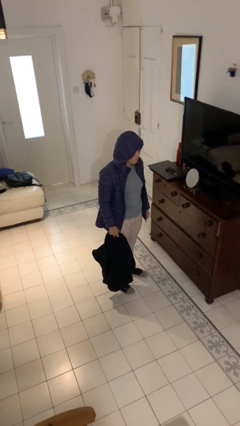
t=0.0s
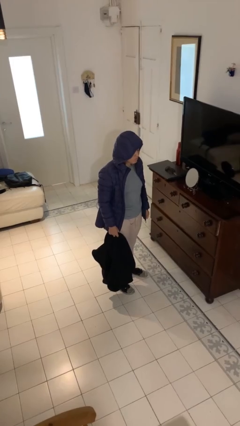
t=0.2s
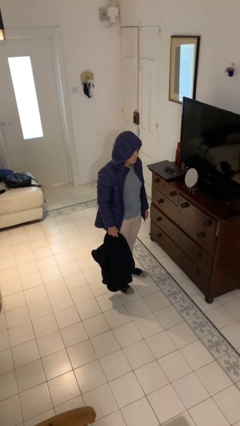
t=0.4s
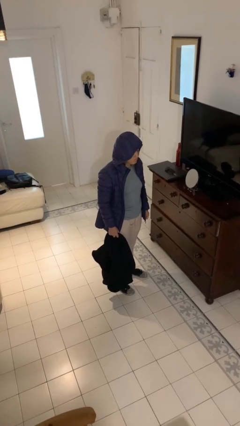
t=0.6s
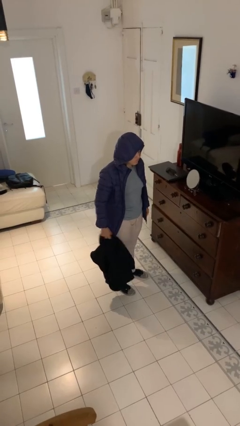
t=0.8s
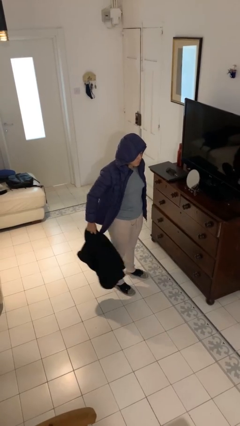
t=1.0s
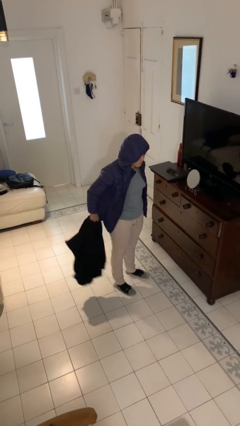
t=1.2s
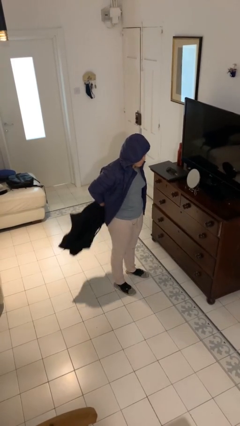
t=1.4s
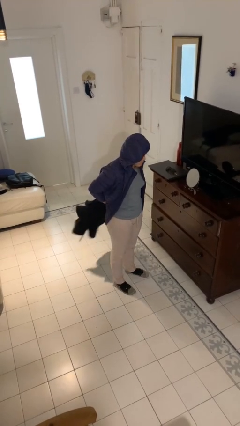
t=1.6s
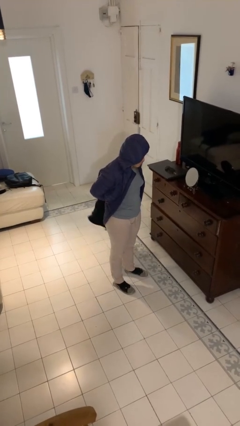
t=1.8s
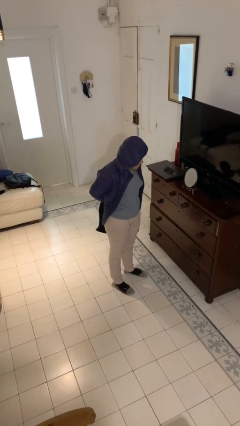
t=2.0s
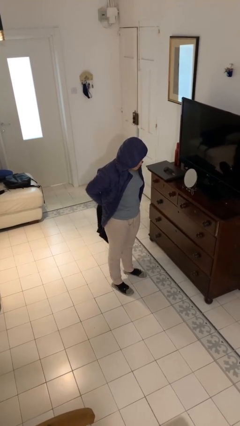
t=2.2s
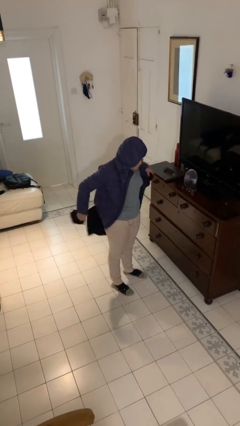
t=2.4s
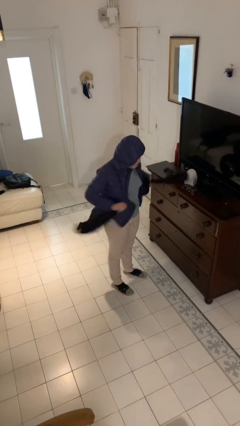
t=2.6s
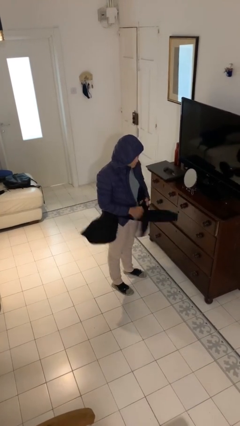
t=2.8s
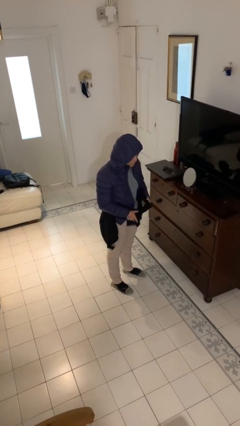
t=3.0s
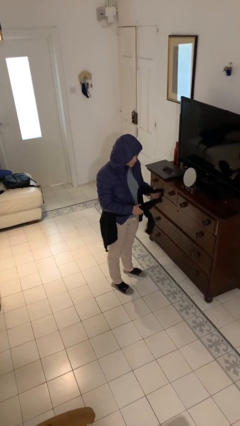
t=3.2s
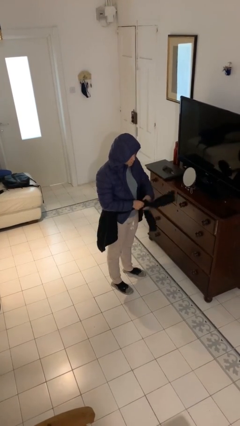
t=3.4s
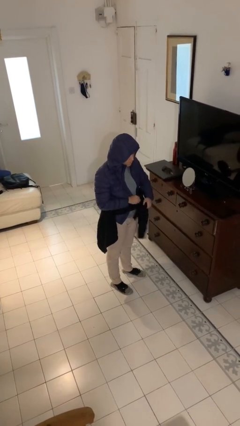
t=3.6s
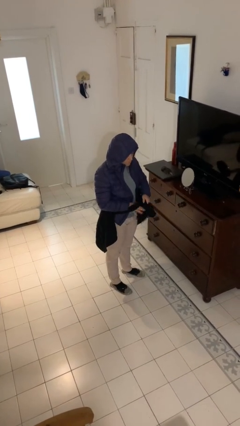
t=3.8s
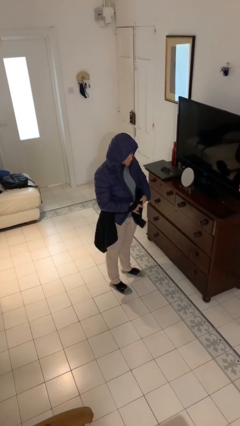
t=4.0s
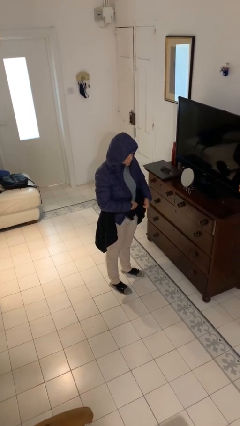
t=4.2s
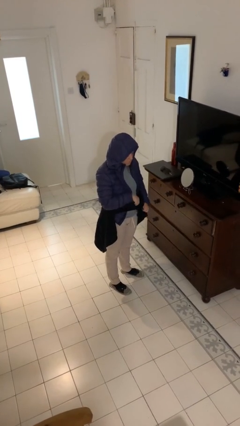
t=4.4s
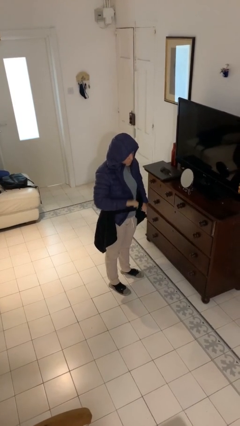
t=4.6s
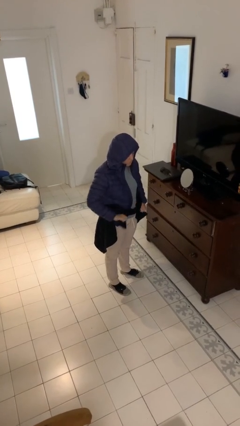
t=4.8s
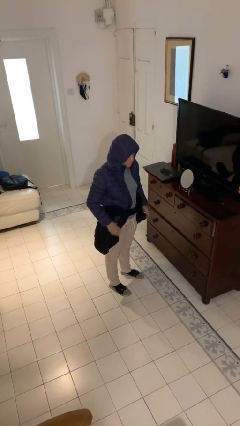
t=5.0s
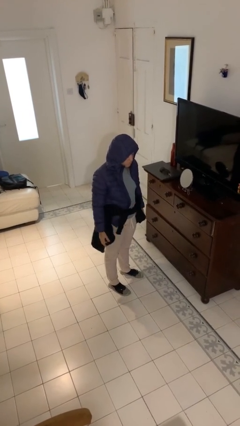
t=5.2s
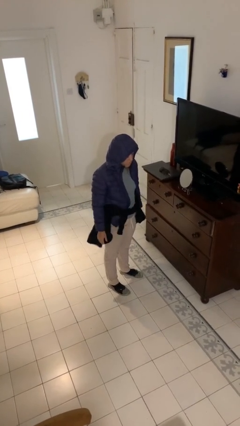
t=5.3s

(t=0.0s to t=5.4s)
person ties jacket around waist

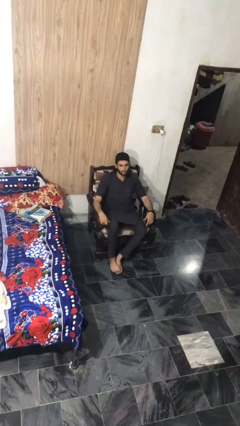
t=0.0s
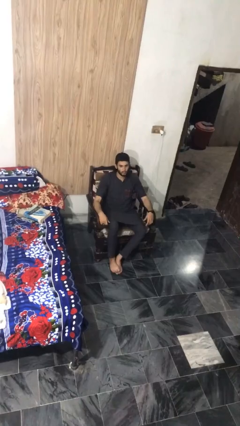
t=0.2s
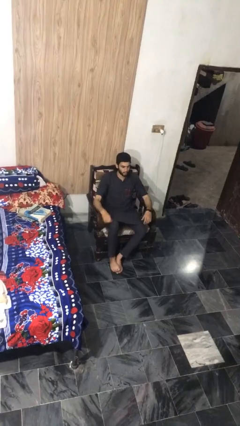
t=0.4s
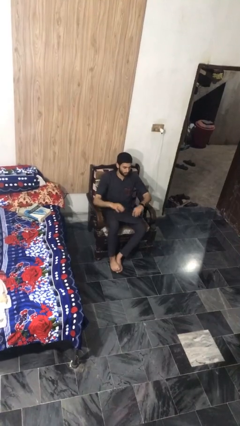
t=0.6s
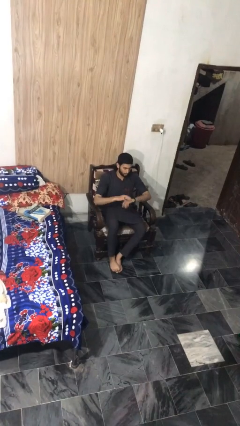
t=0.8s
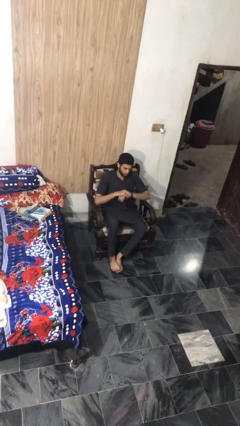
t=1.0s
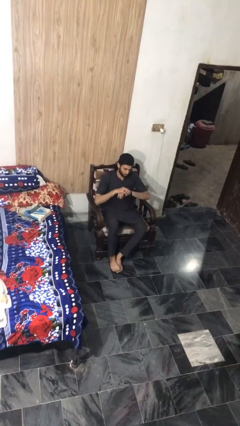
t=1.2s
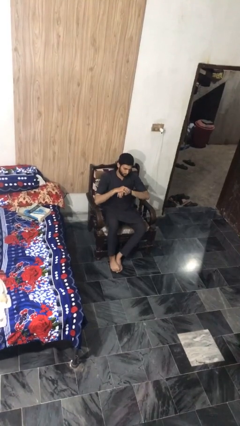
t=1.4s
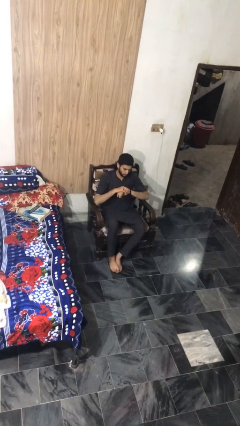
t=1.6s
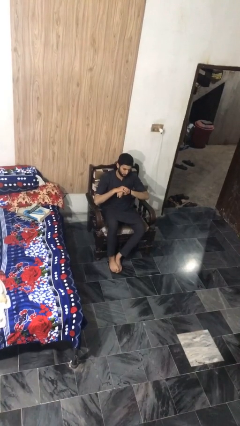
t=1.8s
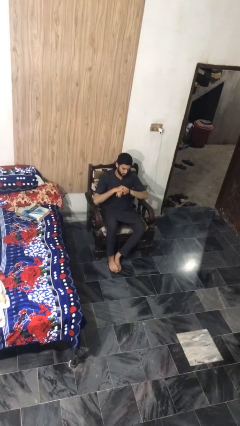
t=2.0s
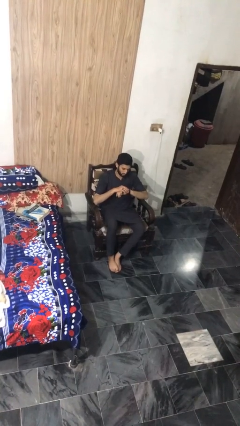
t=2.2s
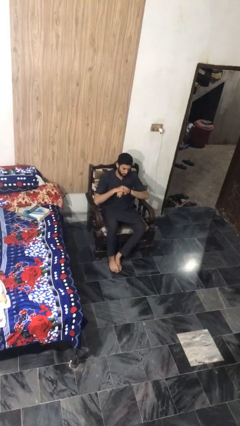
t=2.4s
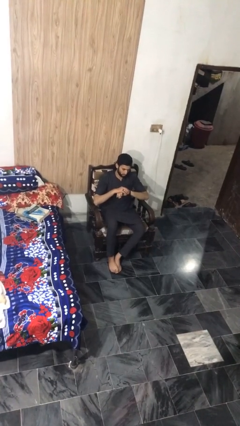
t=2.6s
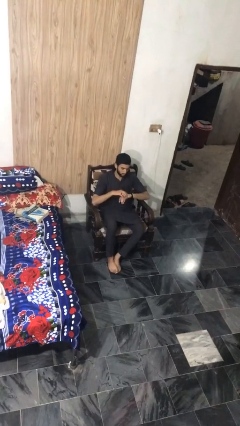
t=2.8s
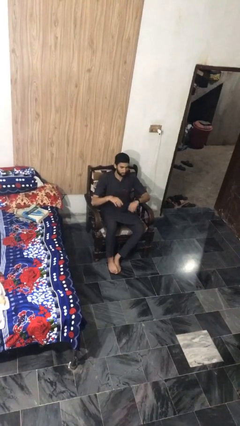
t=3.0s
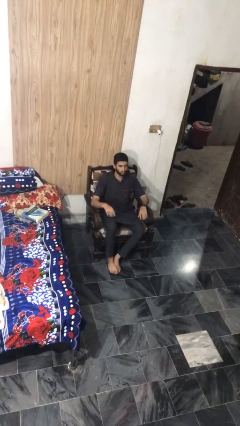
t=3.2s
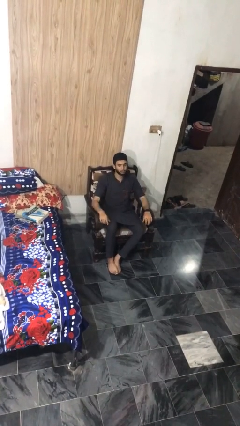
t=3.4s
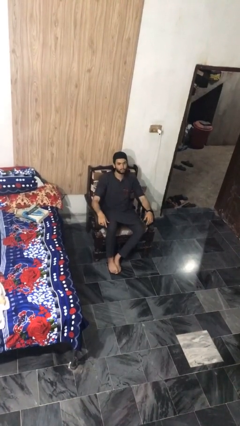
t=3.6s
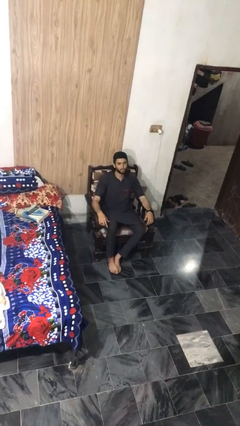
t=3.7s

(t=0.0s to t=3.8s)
person looks at wristwatch

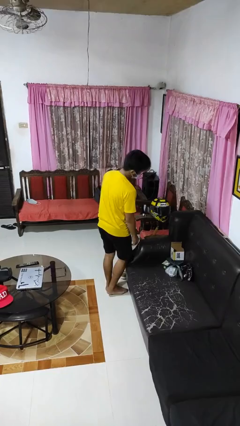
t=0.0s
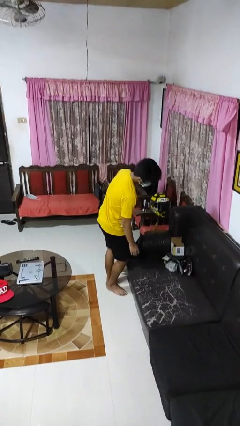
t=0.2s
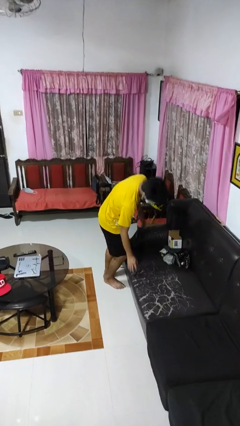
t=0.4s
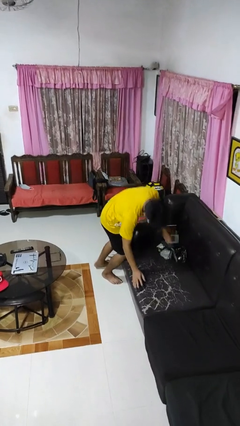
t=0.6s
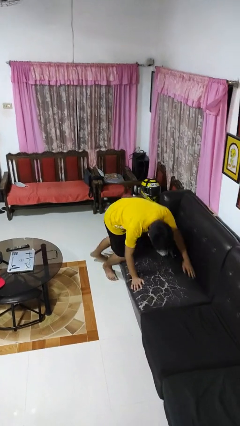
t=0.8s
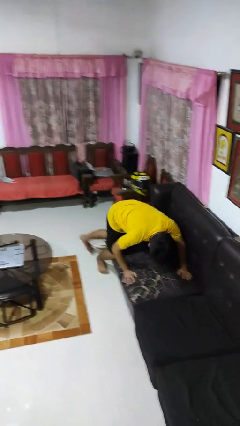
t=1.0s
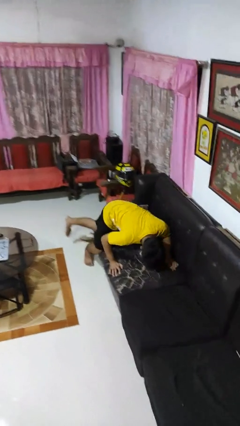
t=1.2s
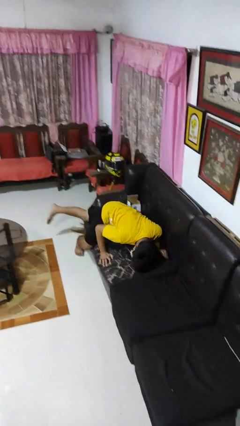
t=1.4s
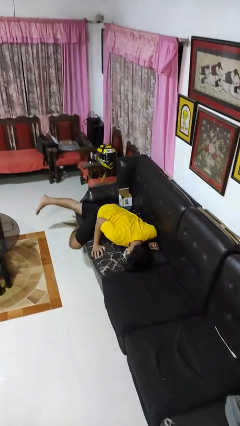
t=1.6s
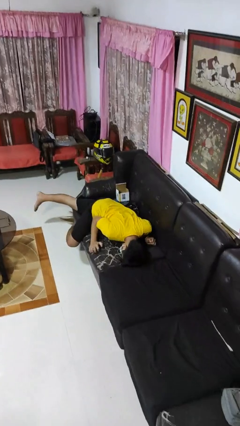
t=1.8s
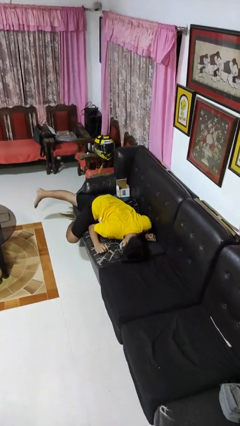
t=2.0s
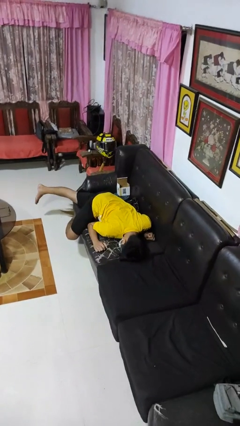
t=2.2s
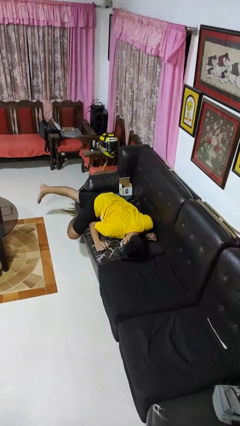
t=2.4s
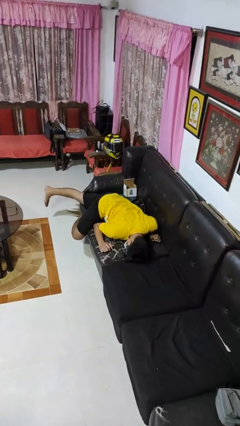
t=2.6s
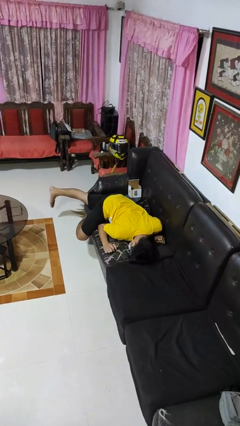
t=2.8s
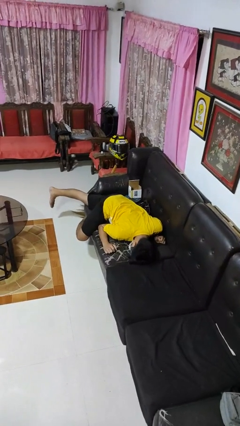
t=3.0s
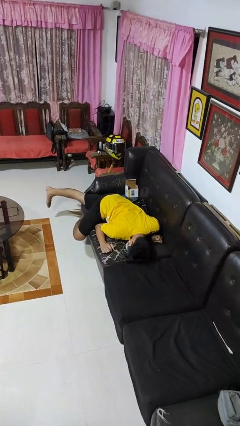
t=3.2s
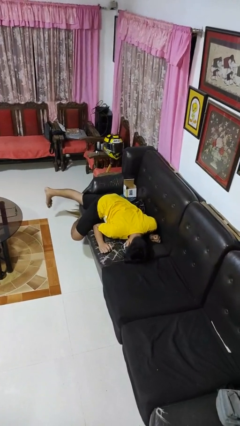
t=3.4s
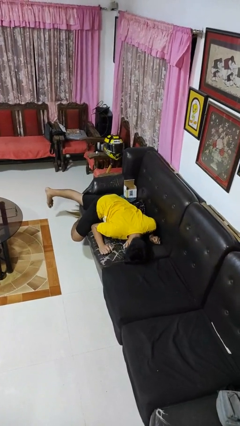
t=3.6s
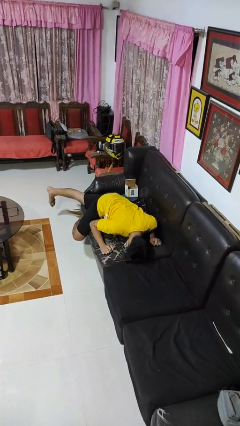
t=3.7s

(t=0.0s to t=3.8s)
person lies down on couch

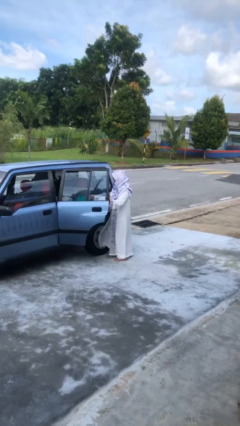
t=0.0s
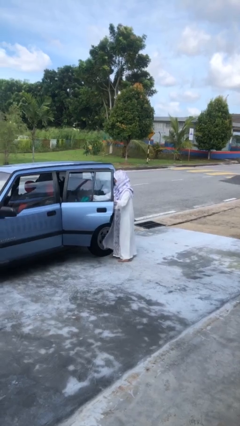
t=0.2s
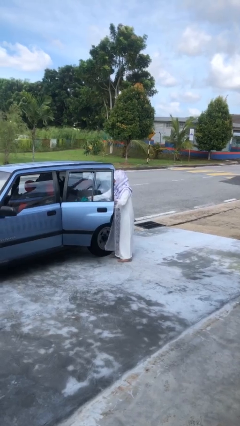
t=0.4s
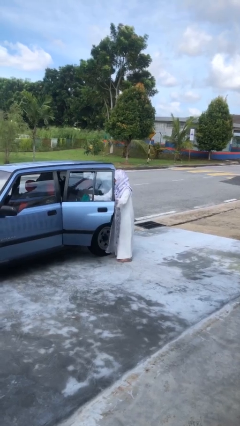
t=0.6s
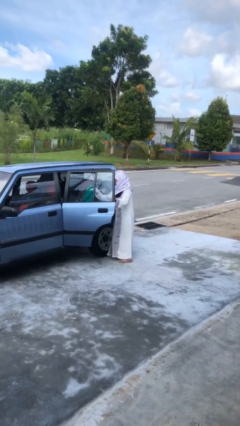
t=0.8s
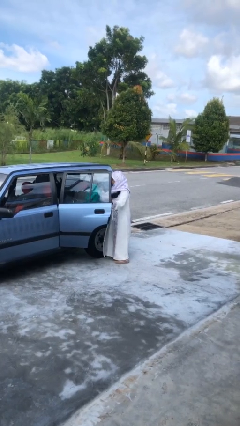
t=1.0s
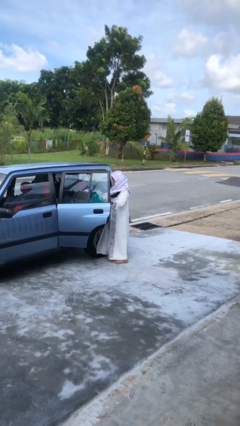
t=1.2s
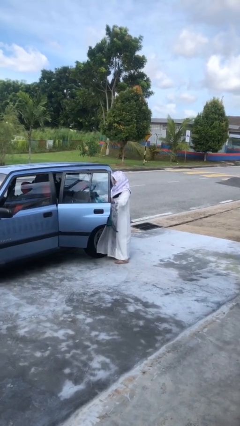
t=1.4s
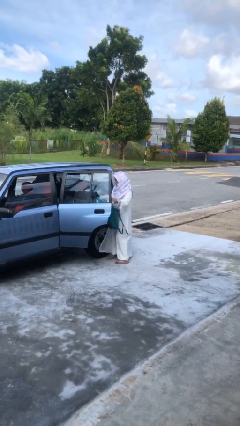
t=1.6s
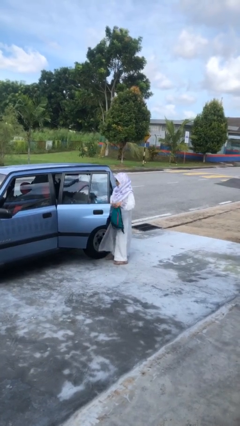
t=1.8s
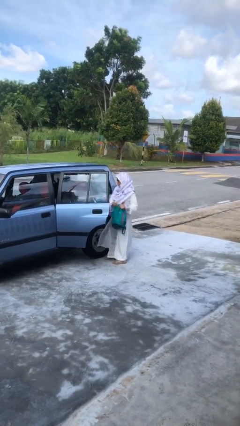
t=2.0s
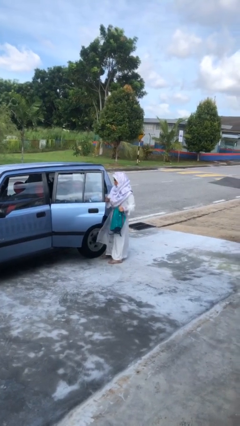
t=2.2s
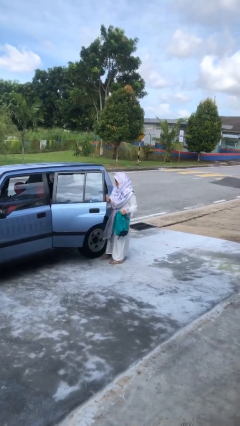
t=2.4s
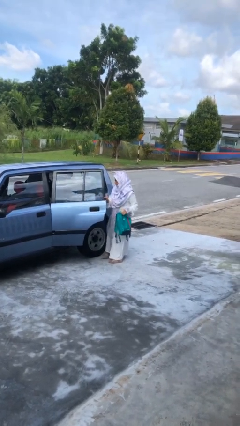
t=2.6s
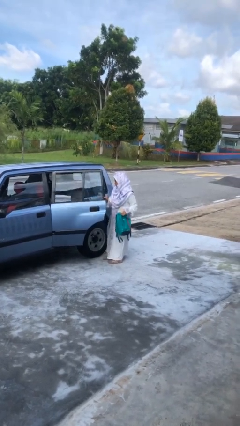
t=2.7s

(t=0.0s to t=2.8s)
person unloads car

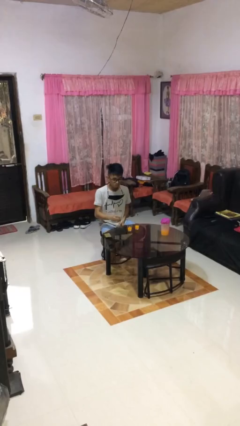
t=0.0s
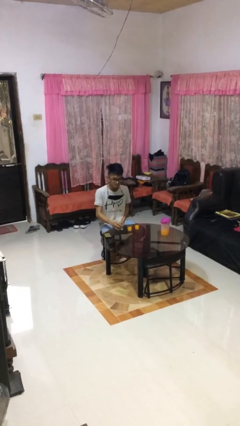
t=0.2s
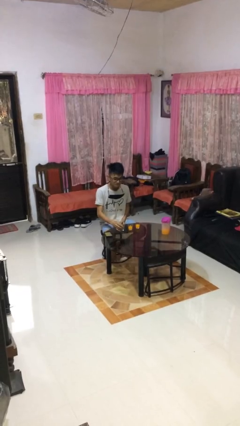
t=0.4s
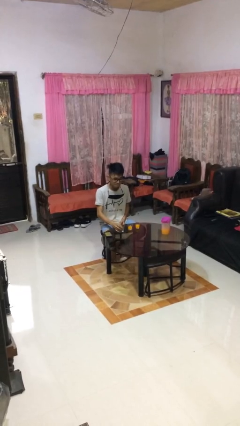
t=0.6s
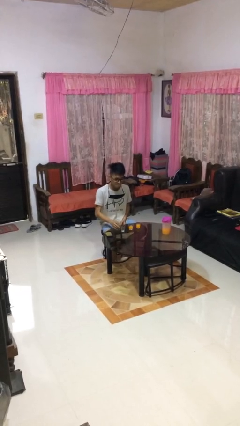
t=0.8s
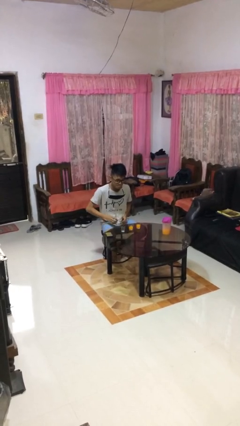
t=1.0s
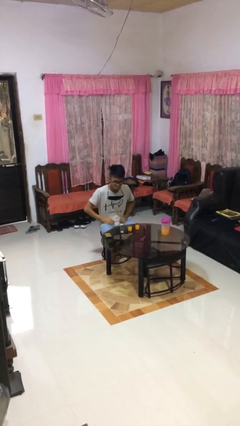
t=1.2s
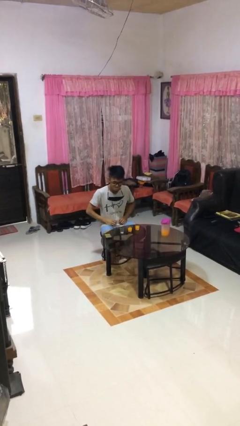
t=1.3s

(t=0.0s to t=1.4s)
person puts down object on table

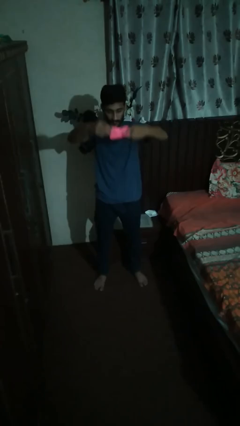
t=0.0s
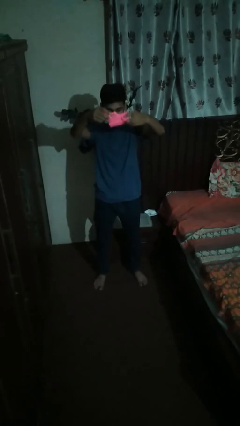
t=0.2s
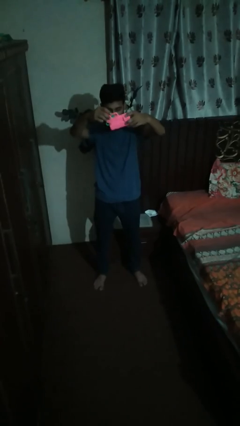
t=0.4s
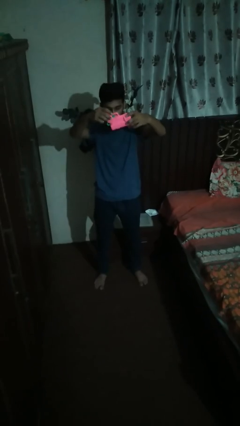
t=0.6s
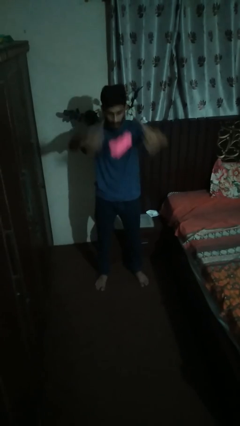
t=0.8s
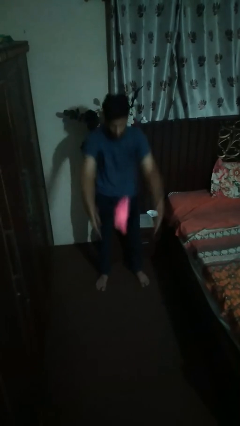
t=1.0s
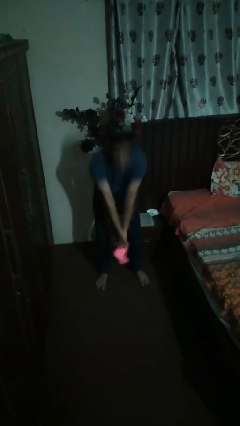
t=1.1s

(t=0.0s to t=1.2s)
person drops object
